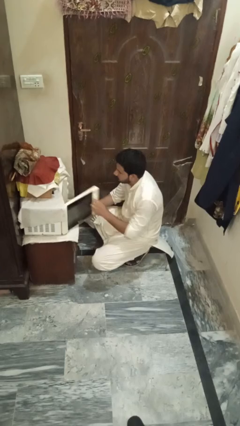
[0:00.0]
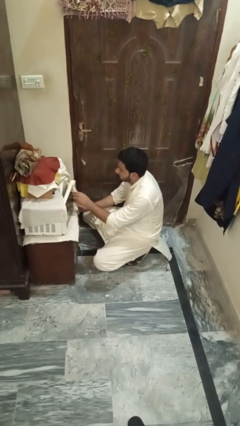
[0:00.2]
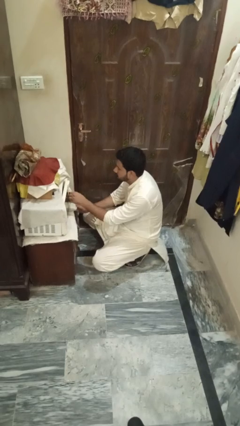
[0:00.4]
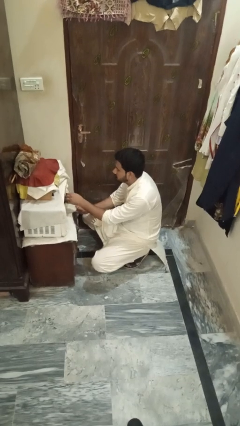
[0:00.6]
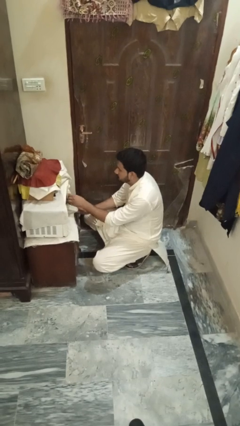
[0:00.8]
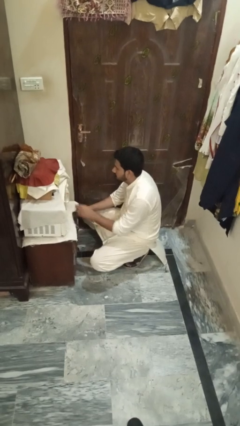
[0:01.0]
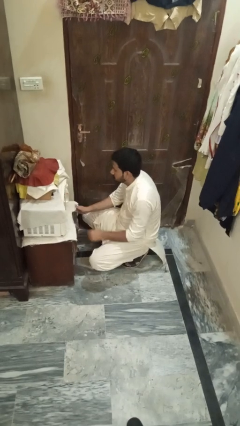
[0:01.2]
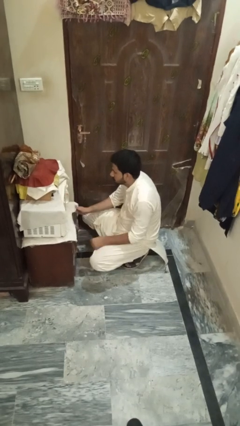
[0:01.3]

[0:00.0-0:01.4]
person closes microwave

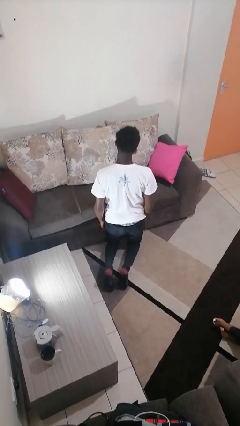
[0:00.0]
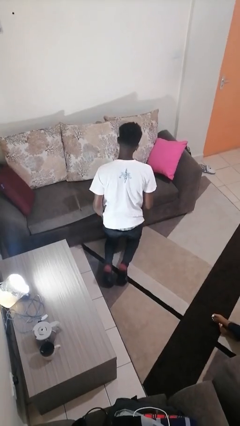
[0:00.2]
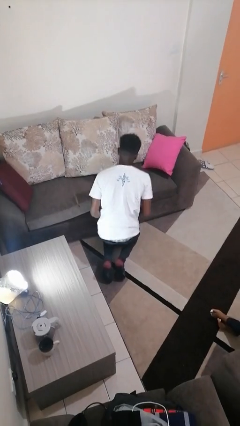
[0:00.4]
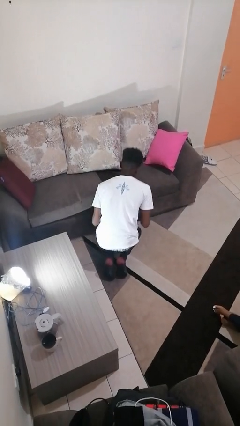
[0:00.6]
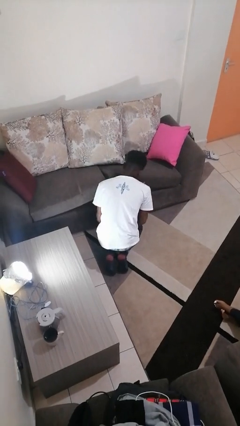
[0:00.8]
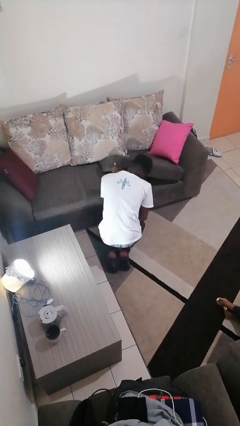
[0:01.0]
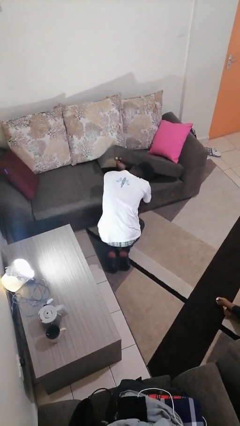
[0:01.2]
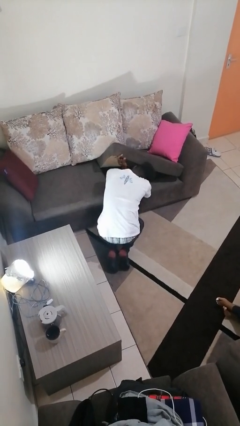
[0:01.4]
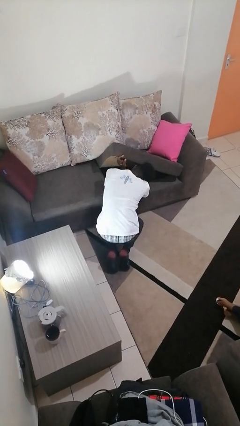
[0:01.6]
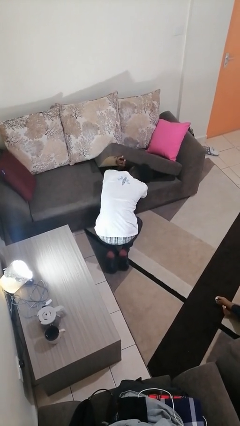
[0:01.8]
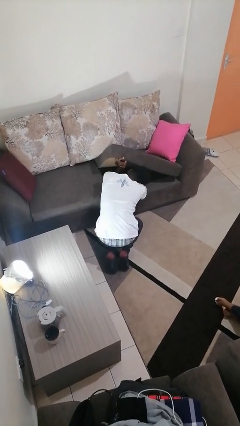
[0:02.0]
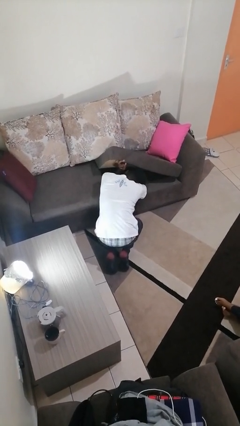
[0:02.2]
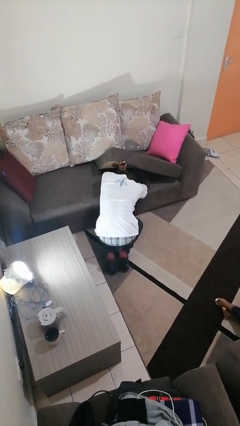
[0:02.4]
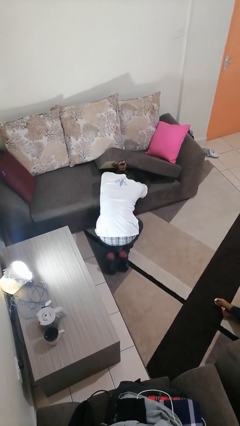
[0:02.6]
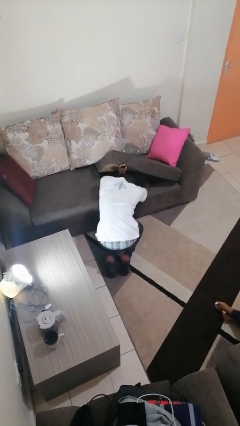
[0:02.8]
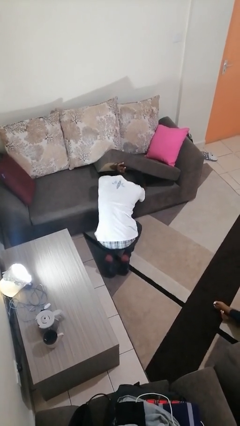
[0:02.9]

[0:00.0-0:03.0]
person searches under couch

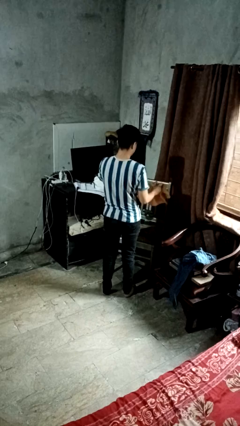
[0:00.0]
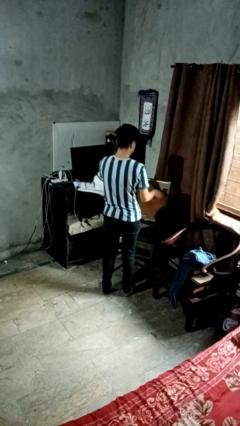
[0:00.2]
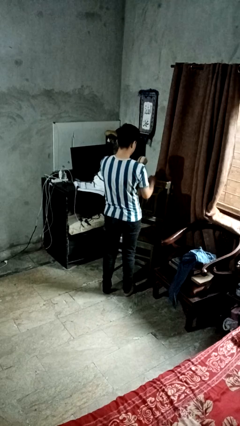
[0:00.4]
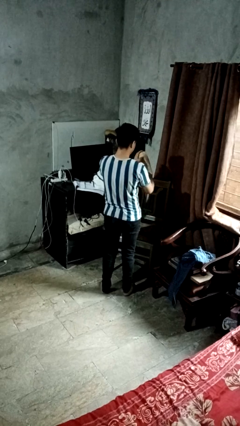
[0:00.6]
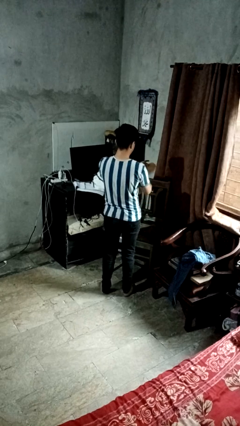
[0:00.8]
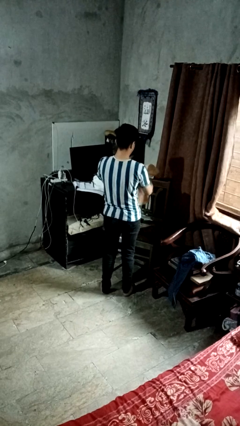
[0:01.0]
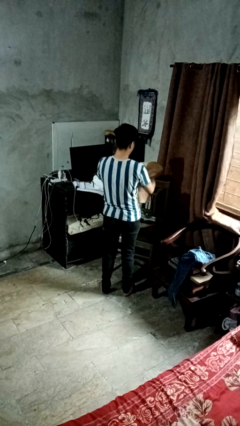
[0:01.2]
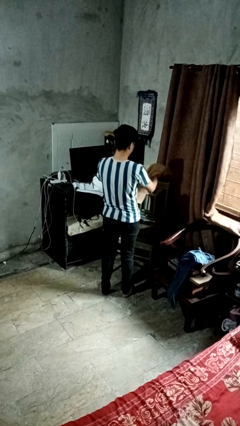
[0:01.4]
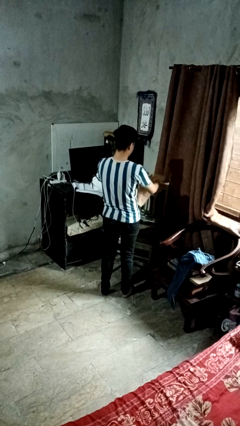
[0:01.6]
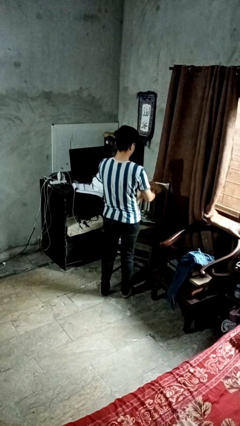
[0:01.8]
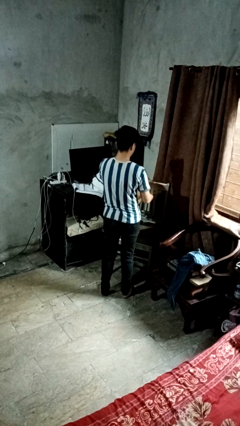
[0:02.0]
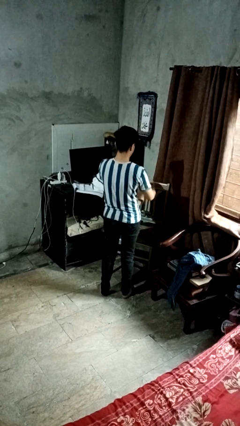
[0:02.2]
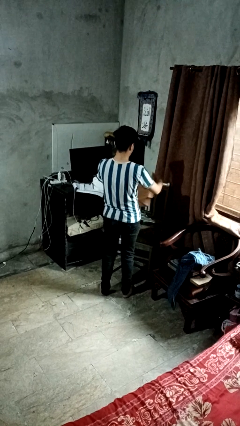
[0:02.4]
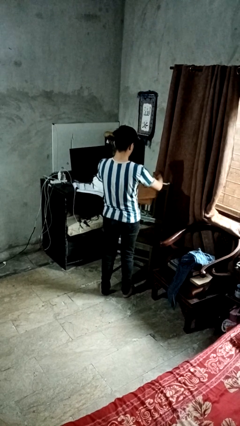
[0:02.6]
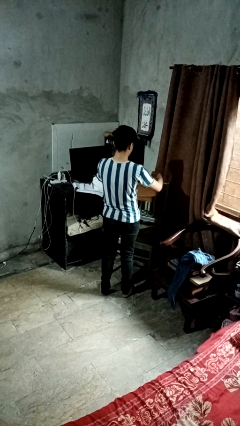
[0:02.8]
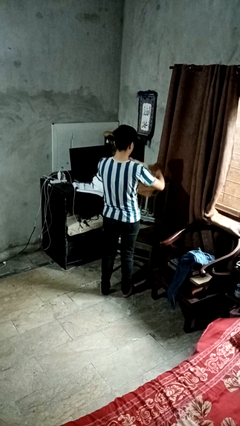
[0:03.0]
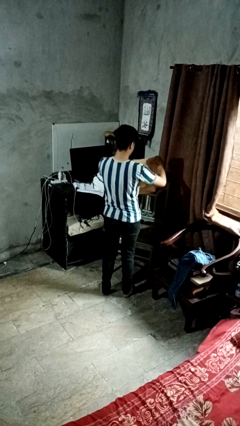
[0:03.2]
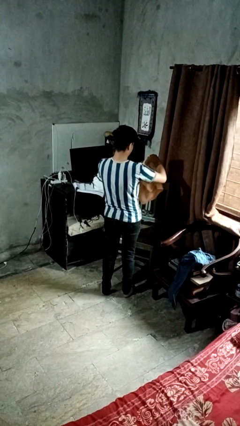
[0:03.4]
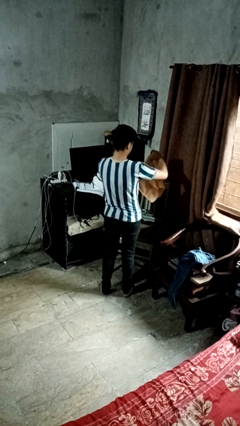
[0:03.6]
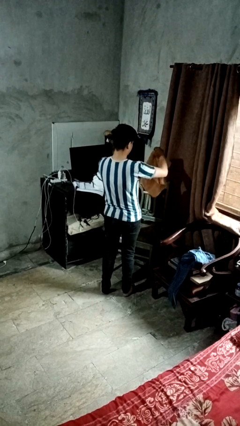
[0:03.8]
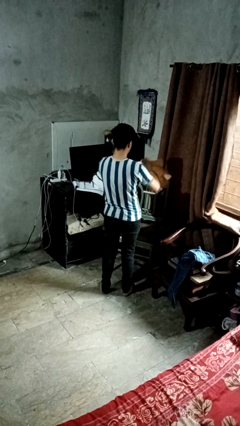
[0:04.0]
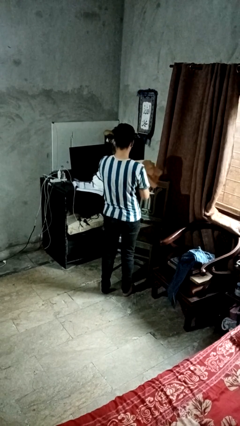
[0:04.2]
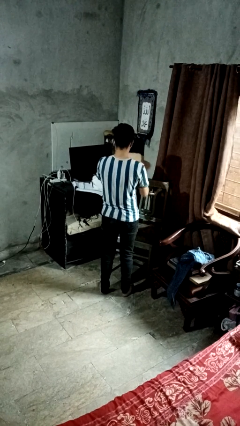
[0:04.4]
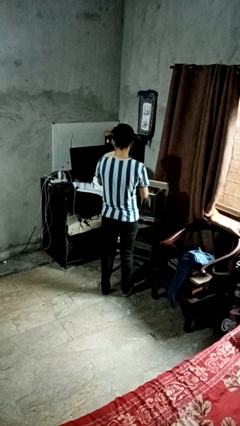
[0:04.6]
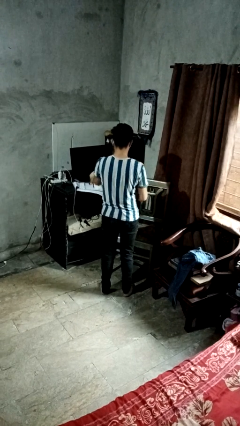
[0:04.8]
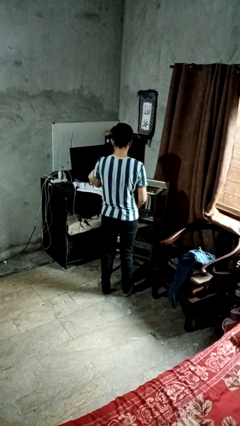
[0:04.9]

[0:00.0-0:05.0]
person folds towel

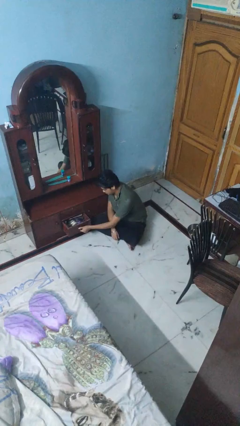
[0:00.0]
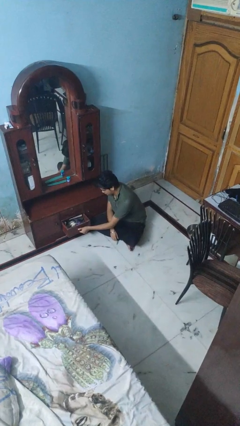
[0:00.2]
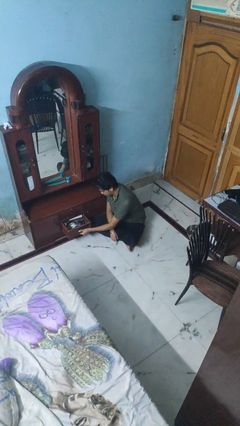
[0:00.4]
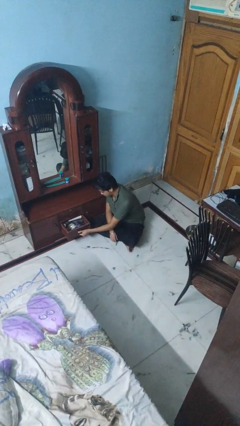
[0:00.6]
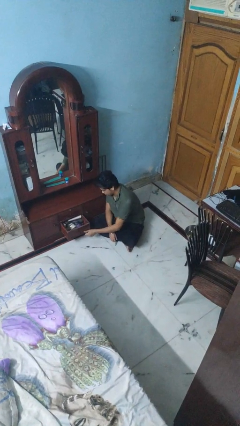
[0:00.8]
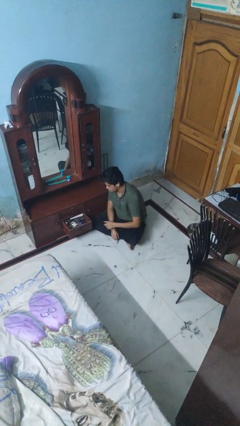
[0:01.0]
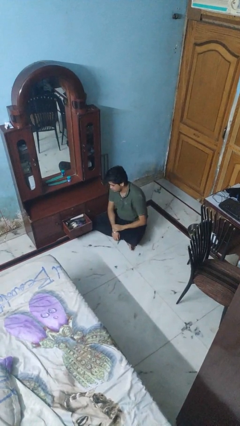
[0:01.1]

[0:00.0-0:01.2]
person opens dresser drawer

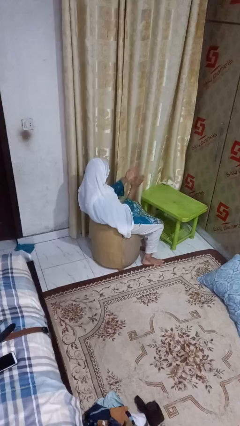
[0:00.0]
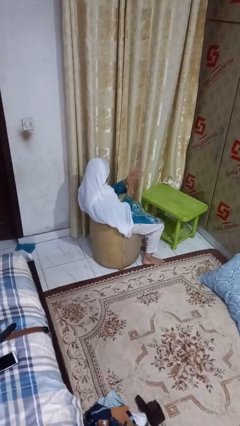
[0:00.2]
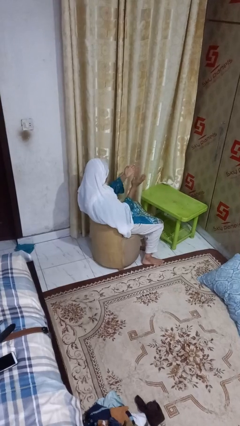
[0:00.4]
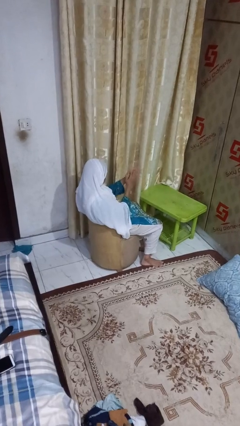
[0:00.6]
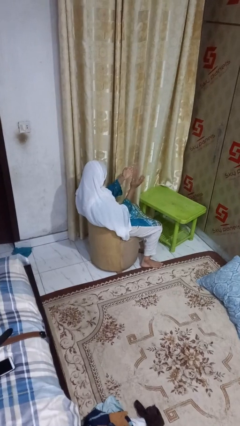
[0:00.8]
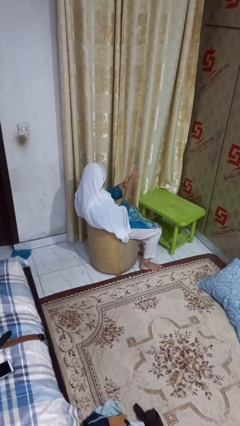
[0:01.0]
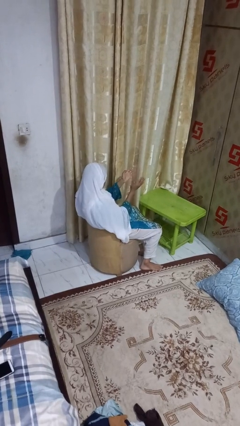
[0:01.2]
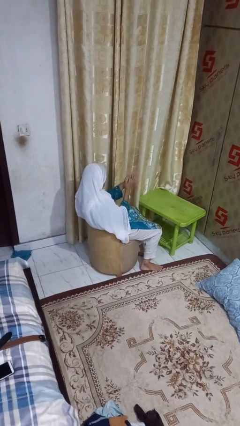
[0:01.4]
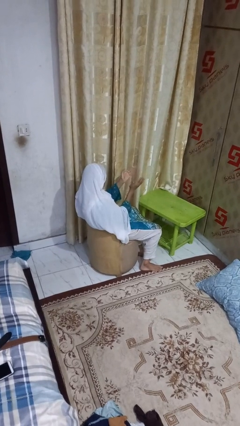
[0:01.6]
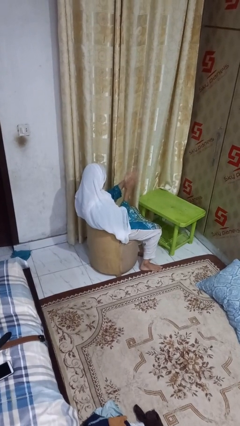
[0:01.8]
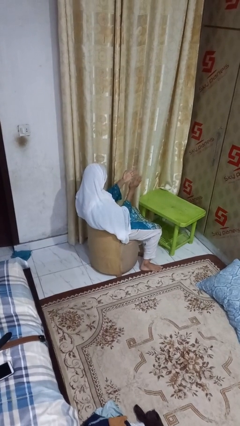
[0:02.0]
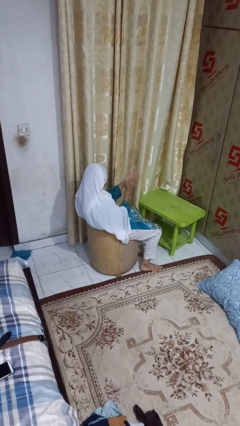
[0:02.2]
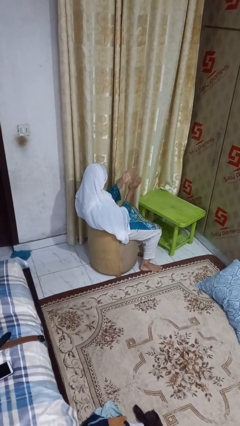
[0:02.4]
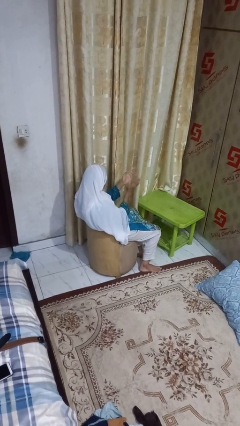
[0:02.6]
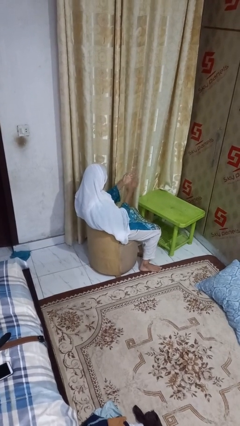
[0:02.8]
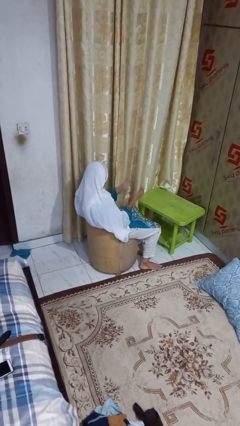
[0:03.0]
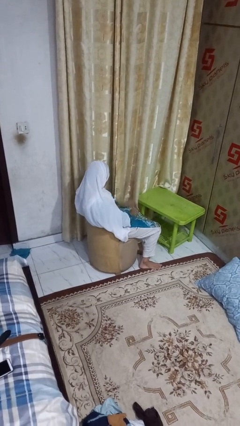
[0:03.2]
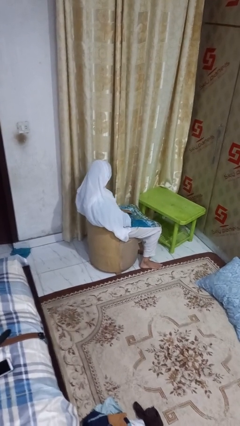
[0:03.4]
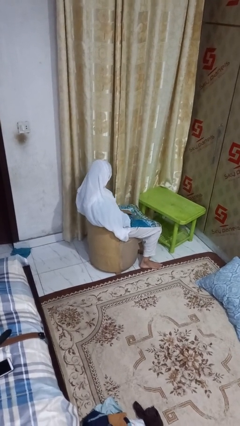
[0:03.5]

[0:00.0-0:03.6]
person claps hands

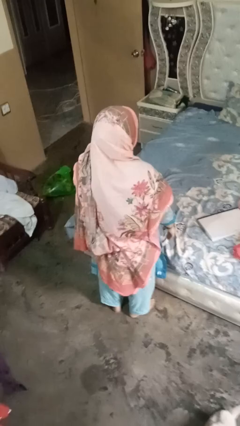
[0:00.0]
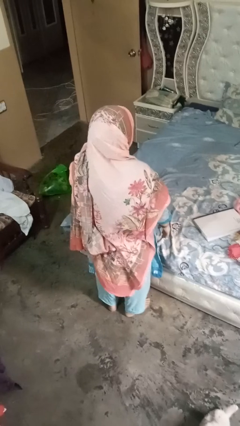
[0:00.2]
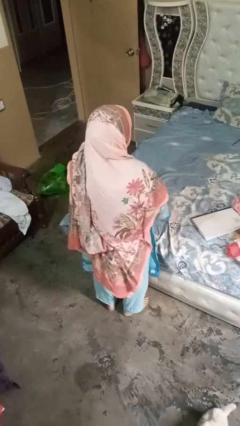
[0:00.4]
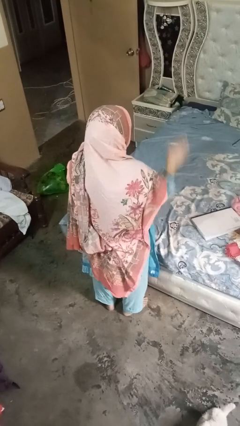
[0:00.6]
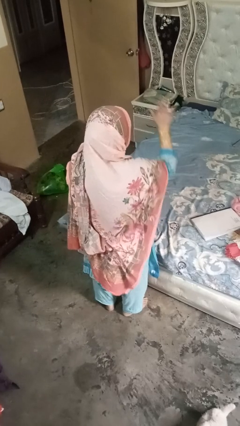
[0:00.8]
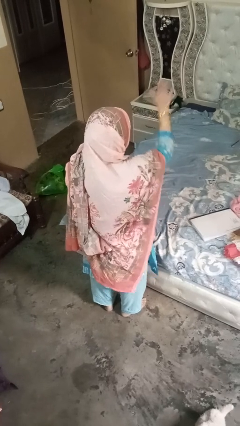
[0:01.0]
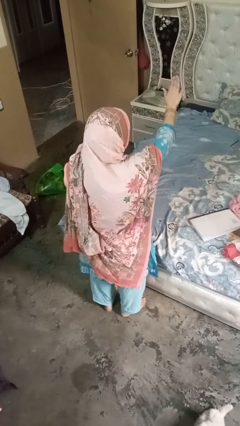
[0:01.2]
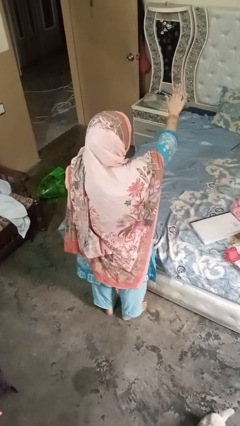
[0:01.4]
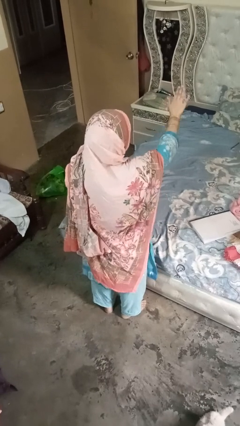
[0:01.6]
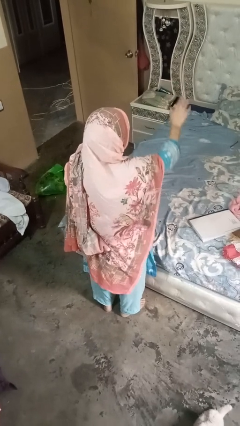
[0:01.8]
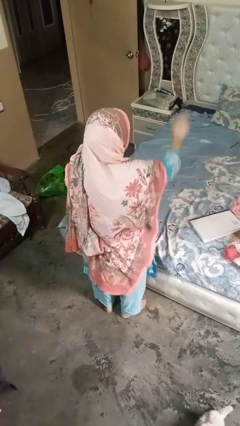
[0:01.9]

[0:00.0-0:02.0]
person gestures stop

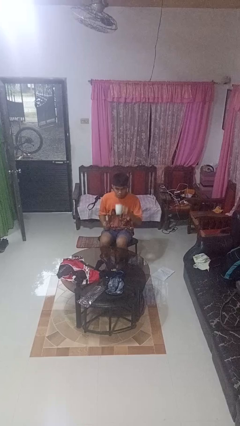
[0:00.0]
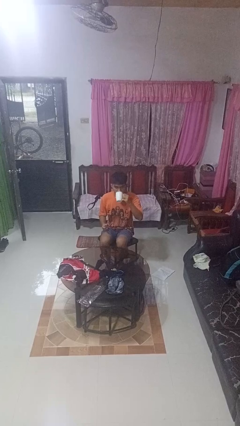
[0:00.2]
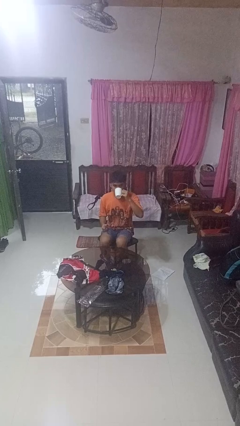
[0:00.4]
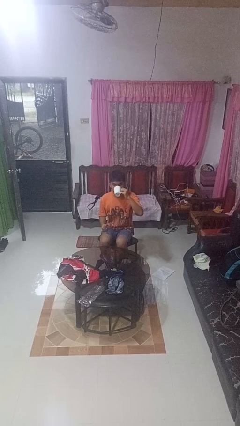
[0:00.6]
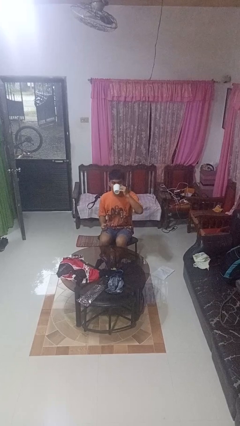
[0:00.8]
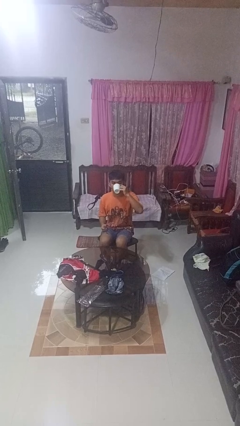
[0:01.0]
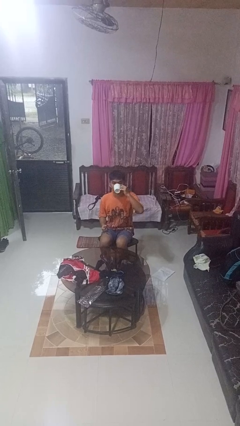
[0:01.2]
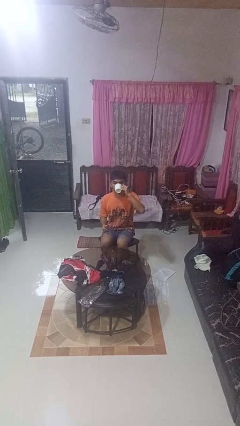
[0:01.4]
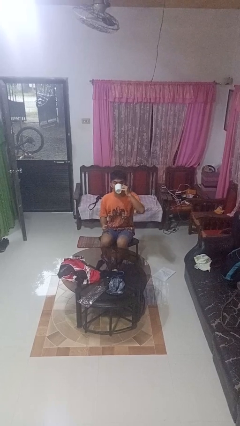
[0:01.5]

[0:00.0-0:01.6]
person drinks from mug
